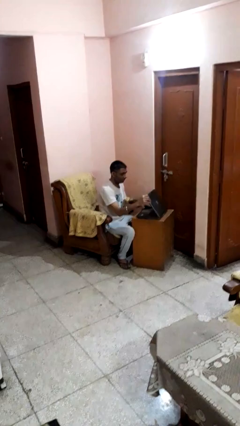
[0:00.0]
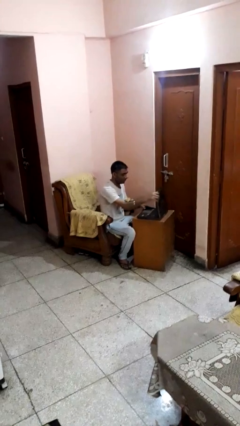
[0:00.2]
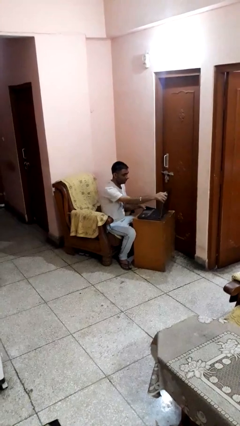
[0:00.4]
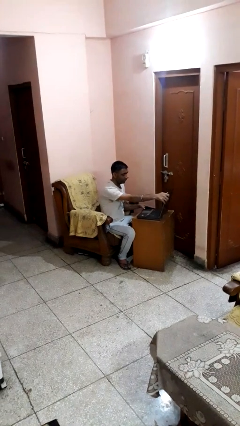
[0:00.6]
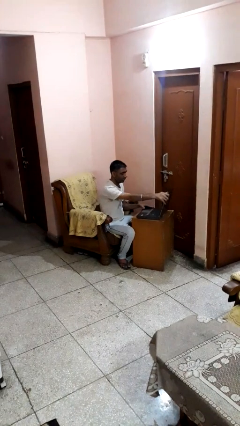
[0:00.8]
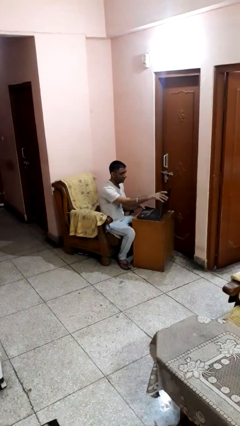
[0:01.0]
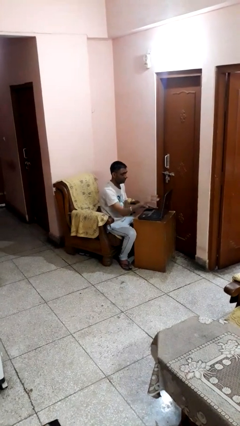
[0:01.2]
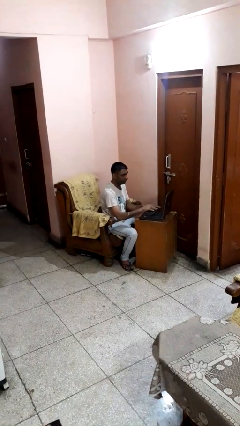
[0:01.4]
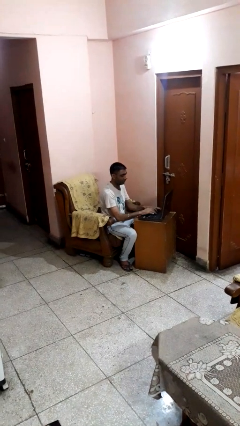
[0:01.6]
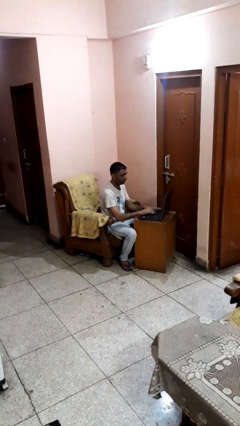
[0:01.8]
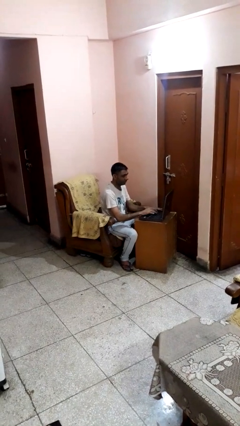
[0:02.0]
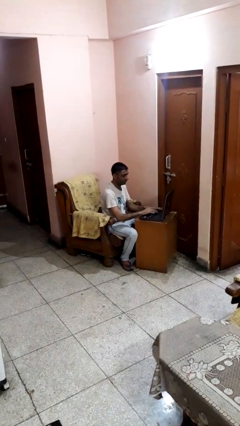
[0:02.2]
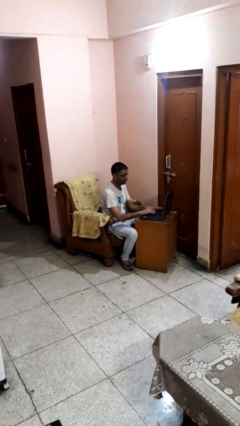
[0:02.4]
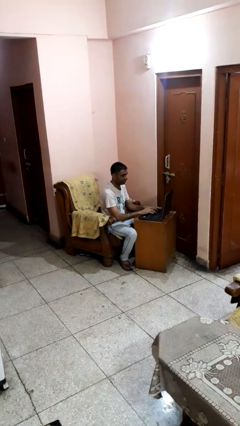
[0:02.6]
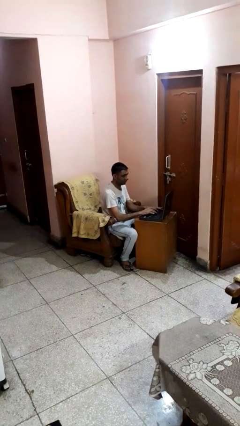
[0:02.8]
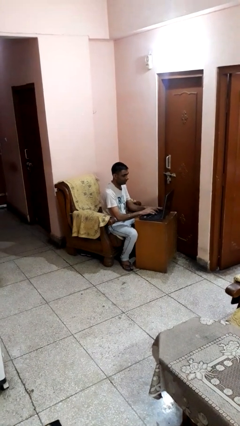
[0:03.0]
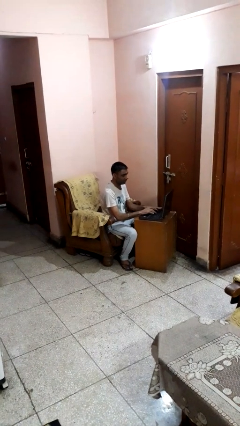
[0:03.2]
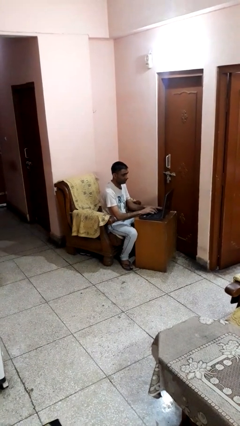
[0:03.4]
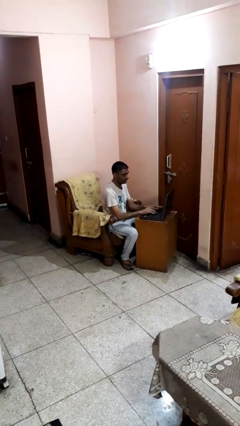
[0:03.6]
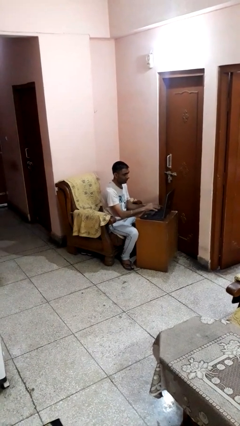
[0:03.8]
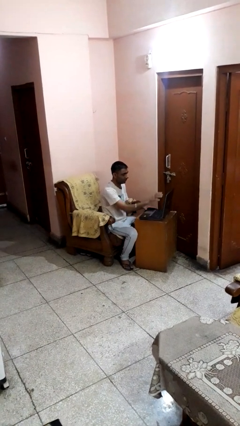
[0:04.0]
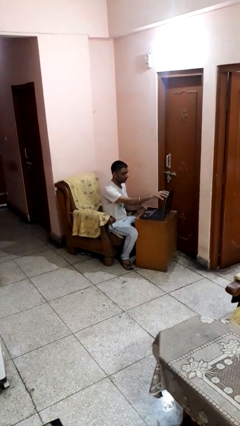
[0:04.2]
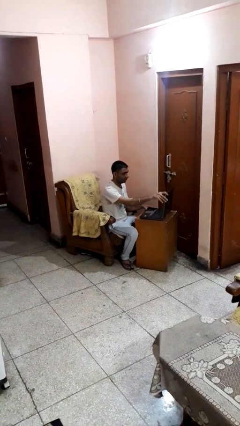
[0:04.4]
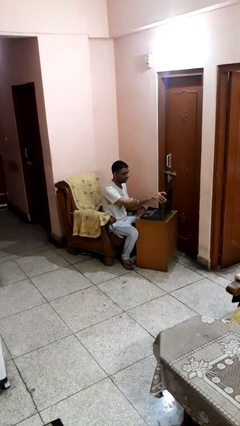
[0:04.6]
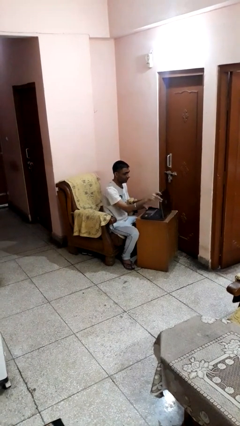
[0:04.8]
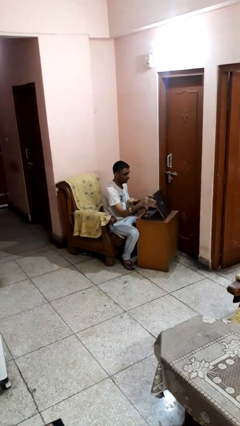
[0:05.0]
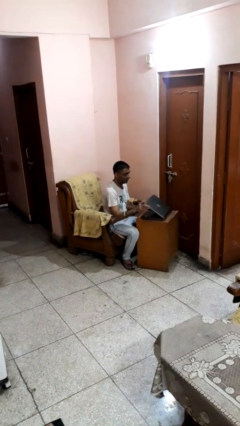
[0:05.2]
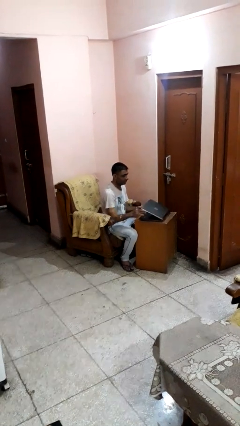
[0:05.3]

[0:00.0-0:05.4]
person interacts with laptop

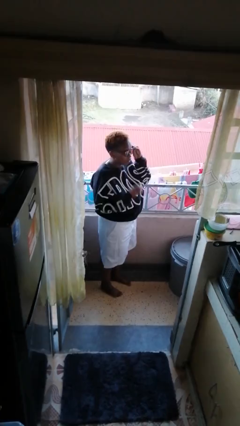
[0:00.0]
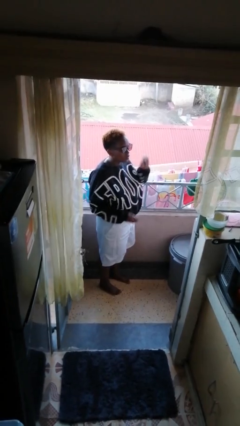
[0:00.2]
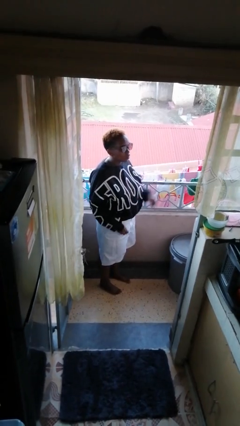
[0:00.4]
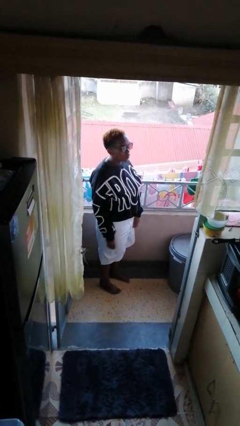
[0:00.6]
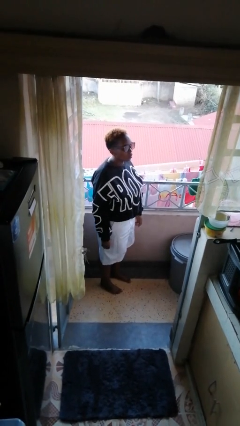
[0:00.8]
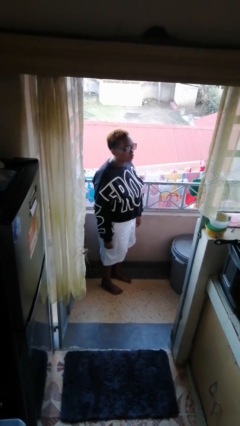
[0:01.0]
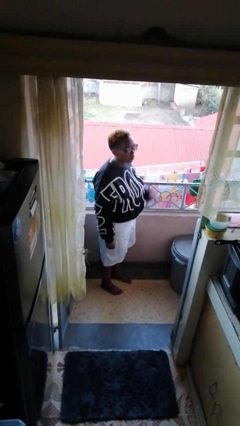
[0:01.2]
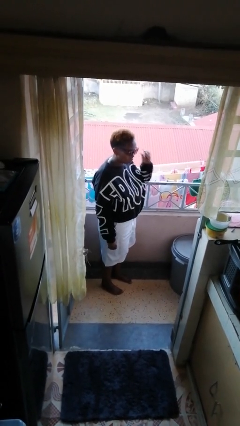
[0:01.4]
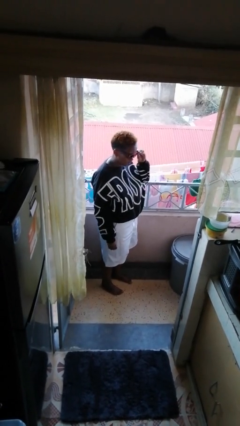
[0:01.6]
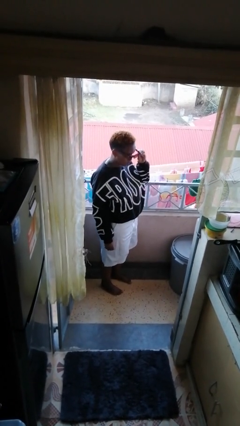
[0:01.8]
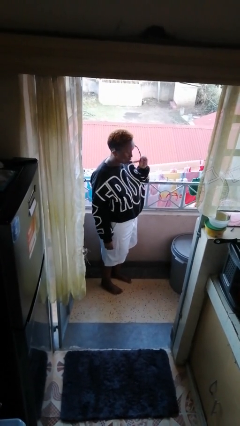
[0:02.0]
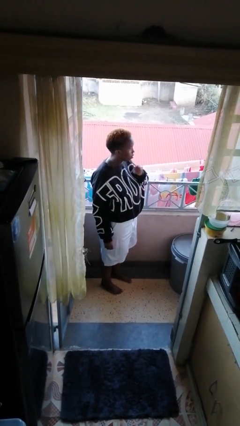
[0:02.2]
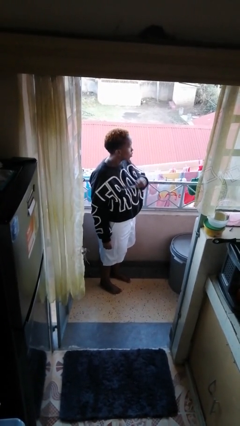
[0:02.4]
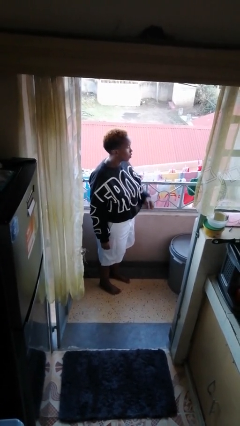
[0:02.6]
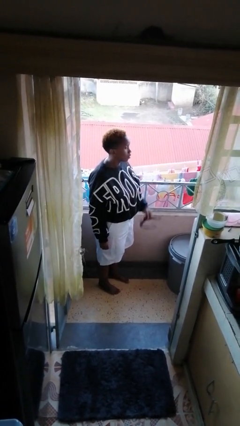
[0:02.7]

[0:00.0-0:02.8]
person takes off sunglasses

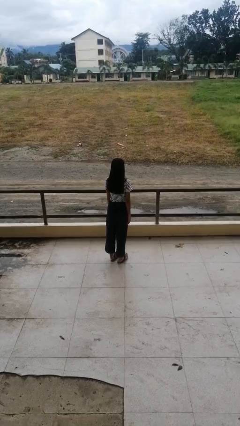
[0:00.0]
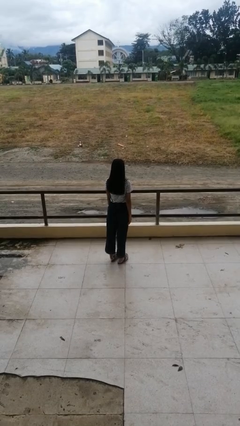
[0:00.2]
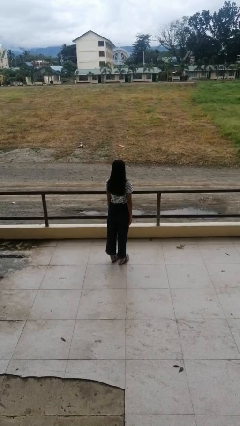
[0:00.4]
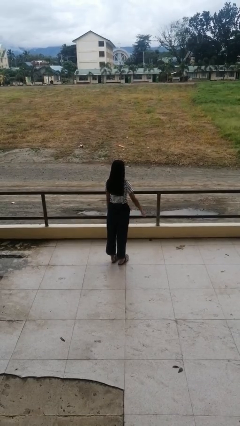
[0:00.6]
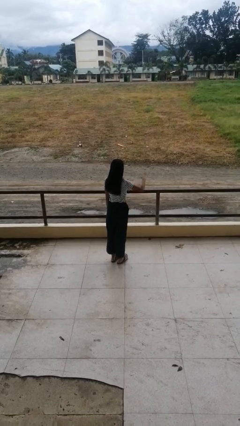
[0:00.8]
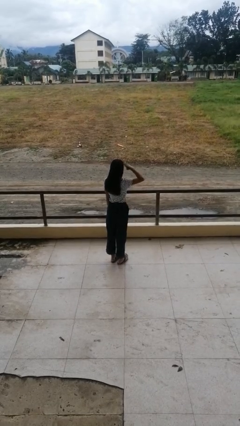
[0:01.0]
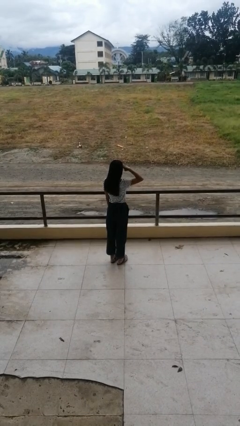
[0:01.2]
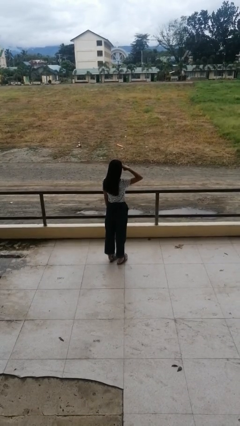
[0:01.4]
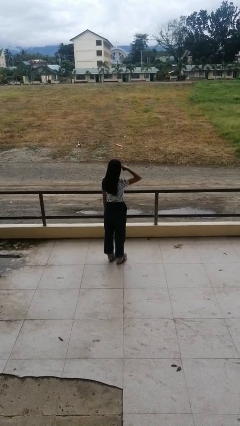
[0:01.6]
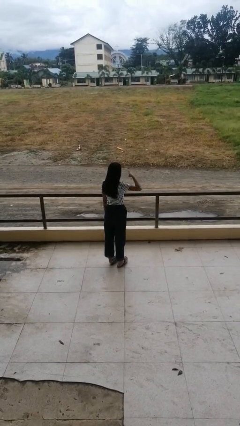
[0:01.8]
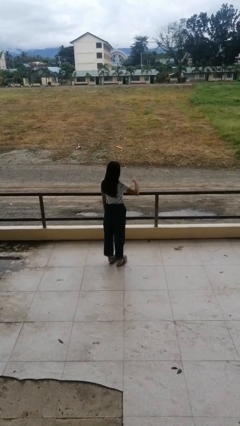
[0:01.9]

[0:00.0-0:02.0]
person salutes

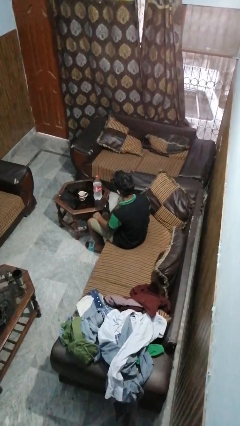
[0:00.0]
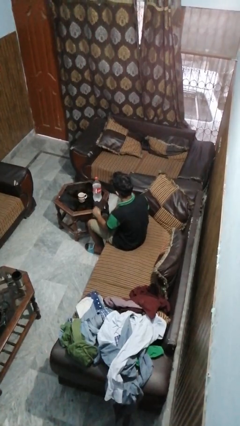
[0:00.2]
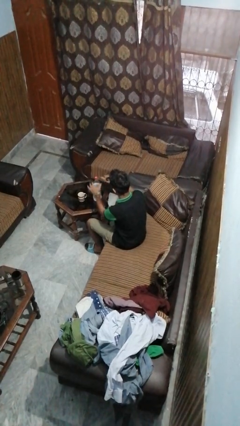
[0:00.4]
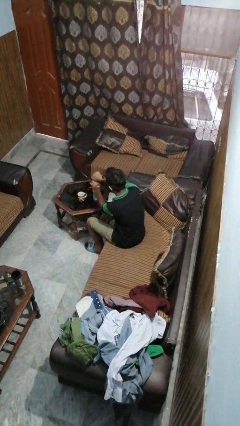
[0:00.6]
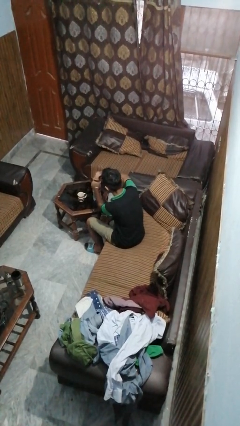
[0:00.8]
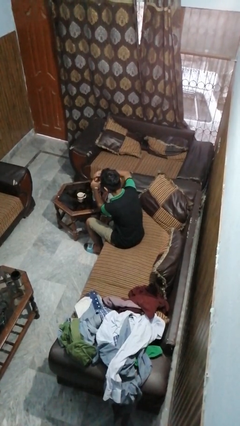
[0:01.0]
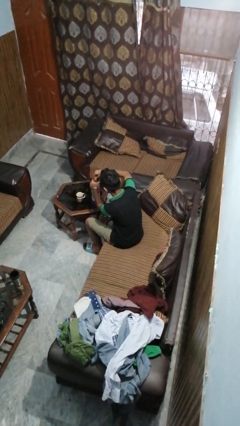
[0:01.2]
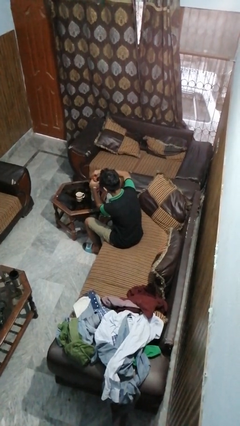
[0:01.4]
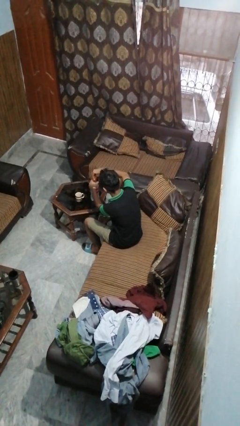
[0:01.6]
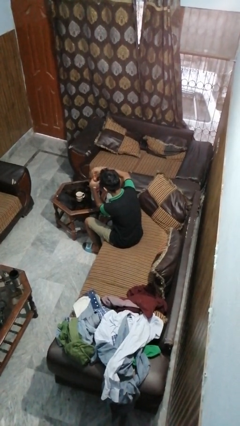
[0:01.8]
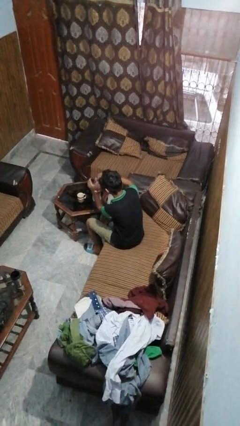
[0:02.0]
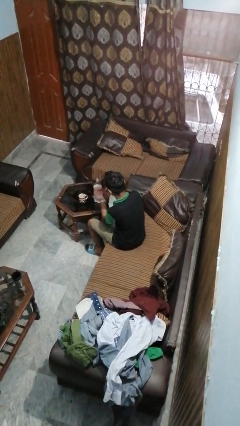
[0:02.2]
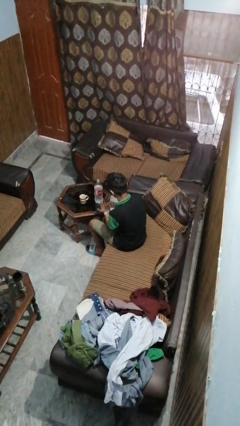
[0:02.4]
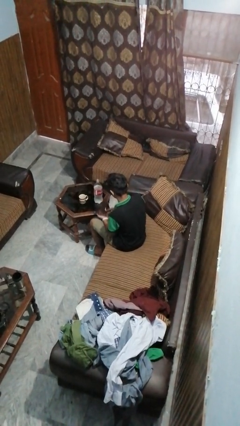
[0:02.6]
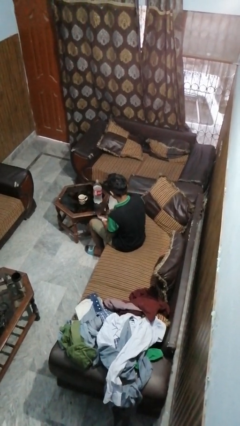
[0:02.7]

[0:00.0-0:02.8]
person unscrews lid from bottle

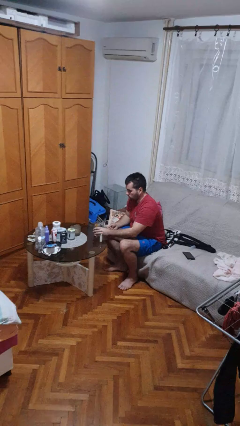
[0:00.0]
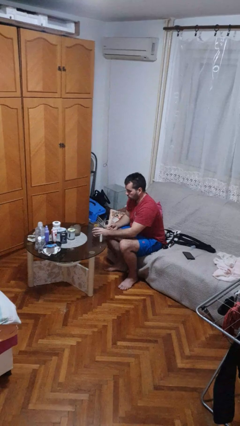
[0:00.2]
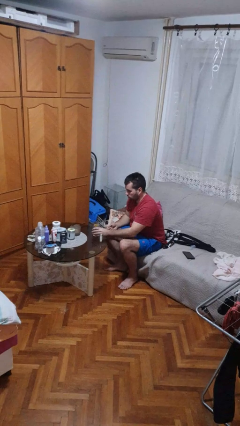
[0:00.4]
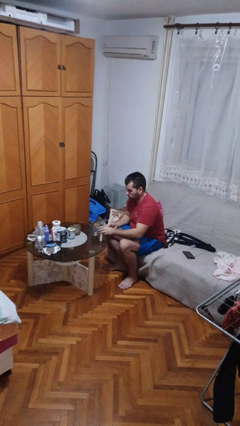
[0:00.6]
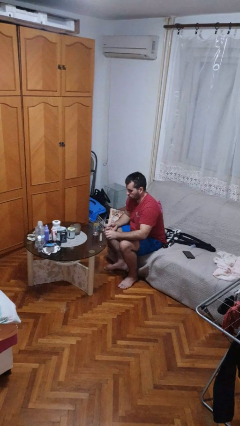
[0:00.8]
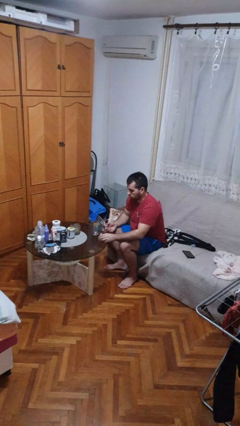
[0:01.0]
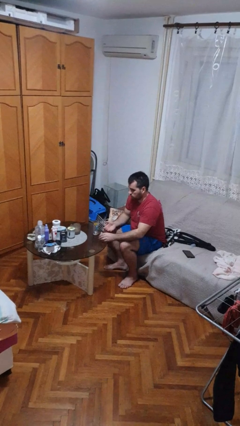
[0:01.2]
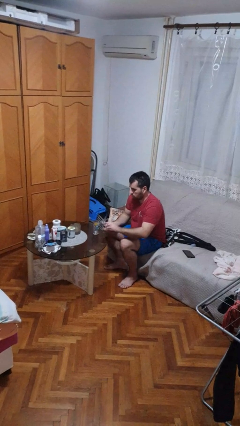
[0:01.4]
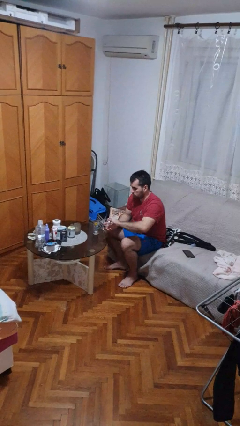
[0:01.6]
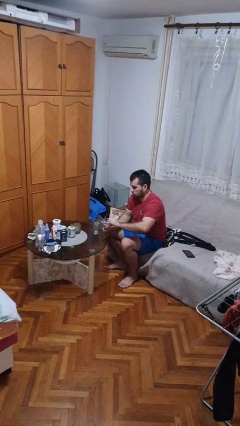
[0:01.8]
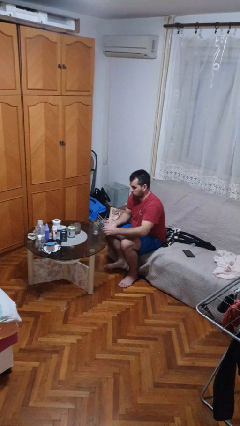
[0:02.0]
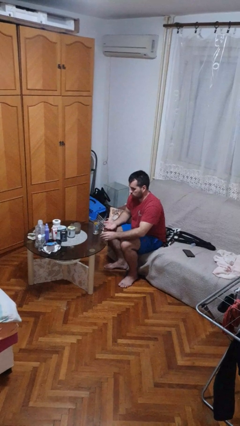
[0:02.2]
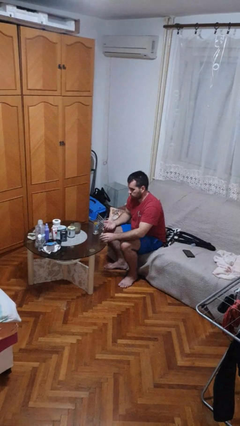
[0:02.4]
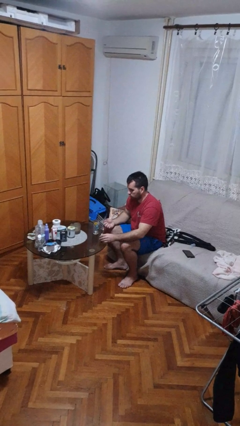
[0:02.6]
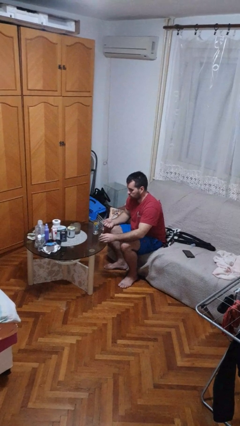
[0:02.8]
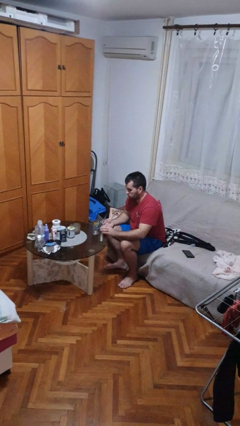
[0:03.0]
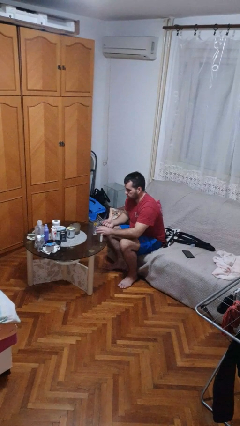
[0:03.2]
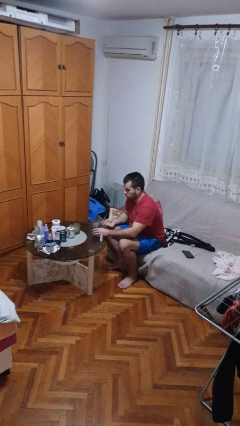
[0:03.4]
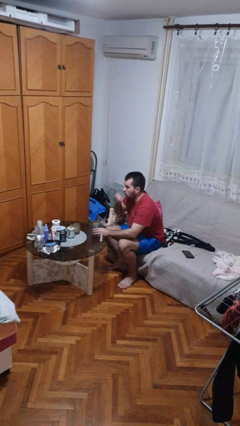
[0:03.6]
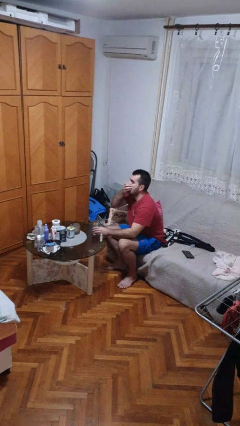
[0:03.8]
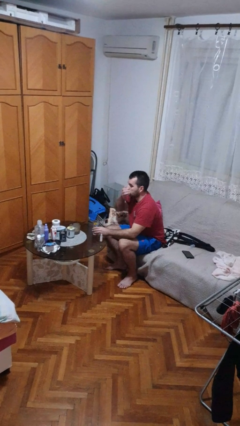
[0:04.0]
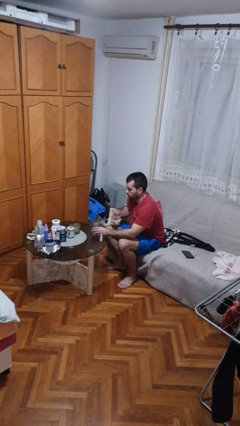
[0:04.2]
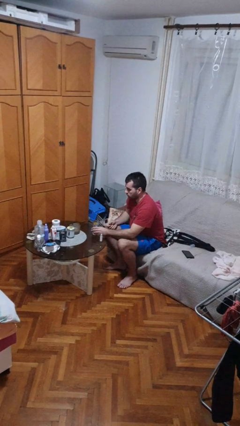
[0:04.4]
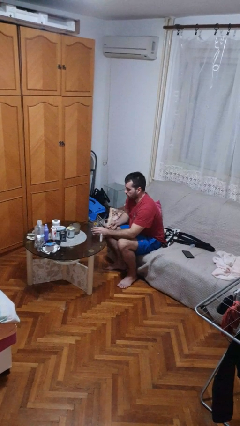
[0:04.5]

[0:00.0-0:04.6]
person takes medicine pills

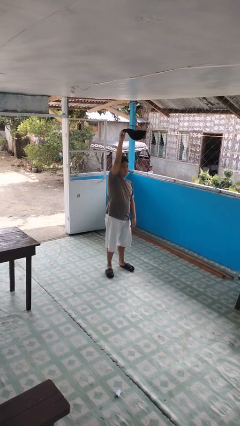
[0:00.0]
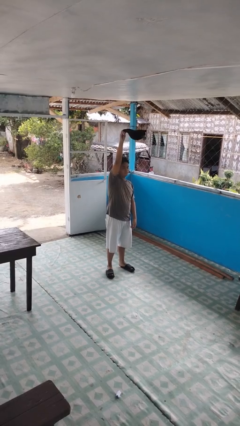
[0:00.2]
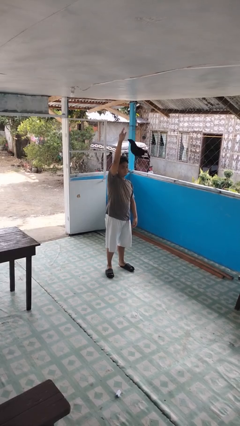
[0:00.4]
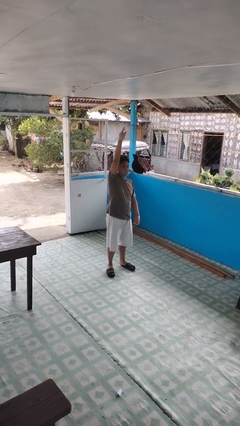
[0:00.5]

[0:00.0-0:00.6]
person drops object
